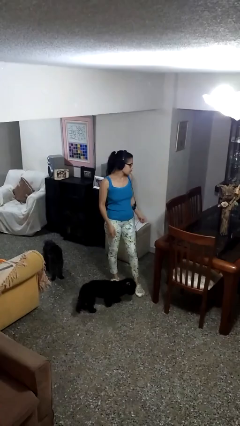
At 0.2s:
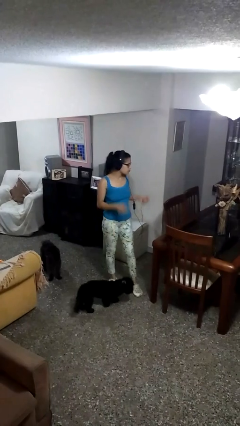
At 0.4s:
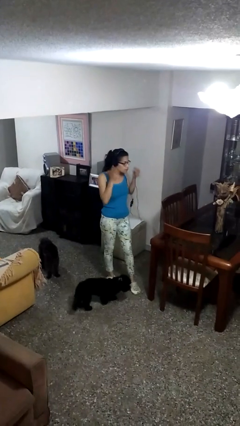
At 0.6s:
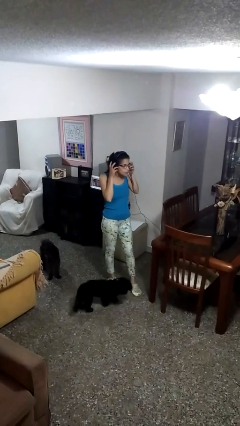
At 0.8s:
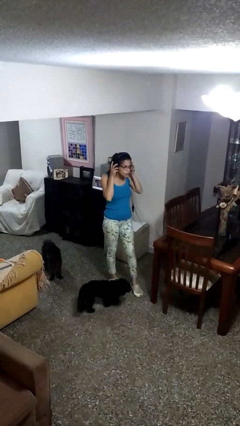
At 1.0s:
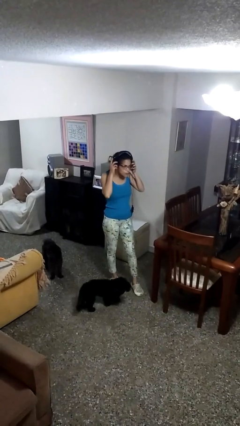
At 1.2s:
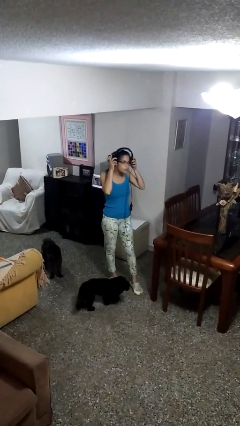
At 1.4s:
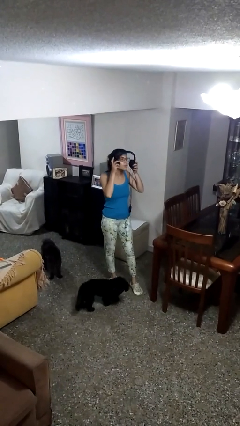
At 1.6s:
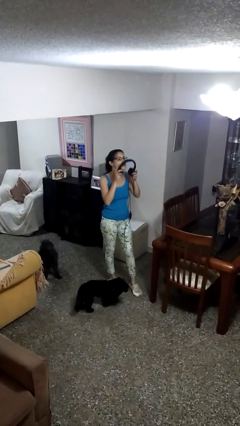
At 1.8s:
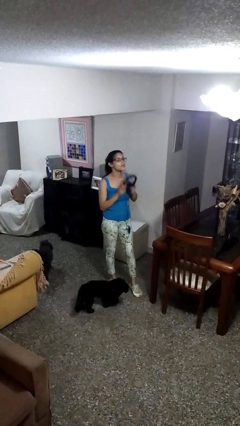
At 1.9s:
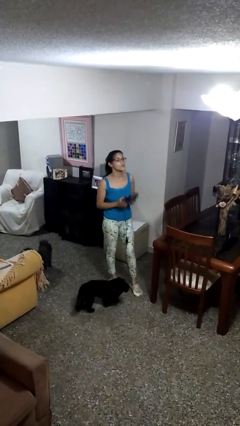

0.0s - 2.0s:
person takes off headphones

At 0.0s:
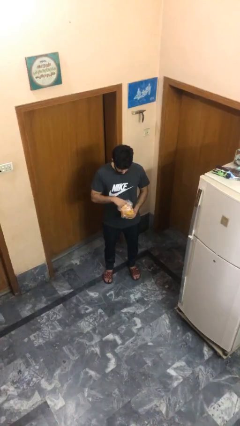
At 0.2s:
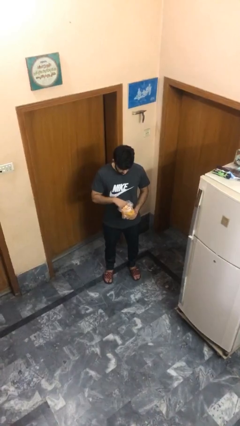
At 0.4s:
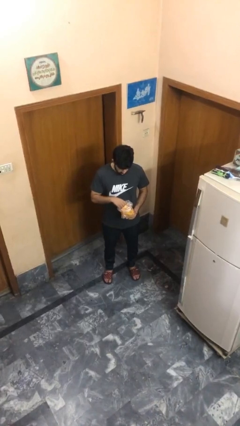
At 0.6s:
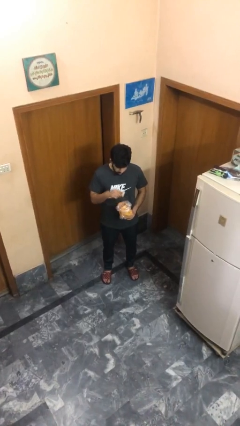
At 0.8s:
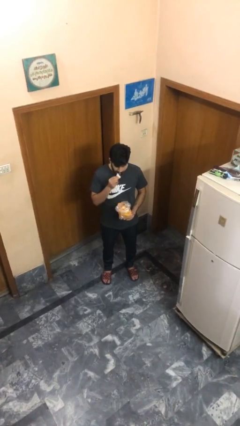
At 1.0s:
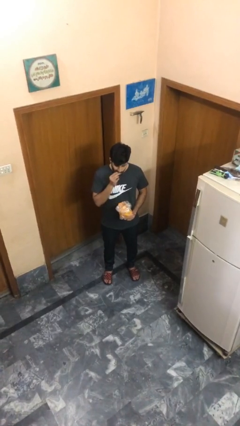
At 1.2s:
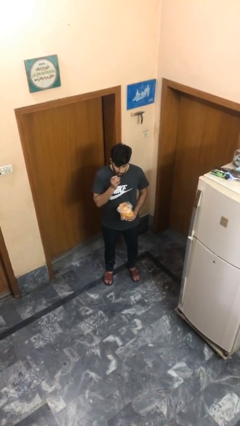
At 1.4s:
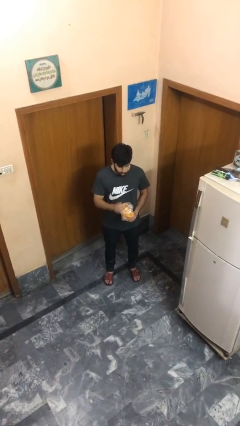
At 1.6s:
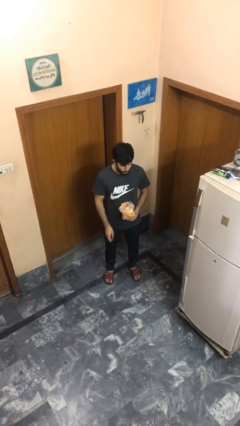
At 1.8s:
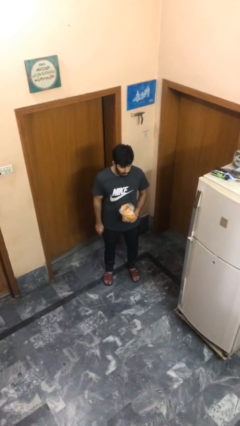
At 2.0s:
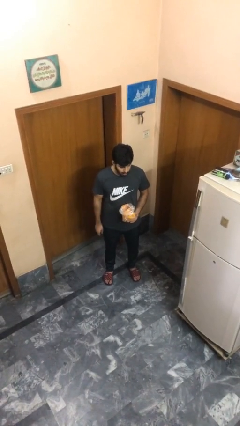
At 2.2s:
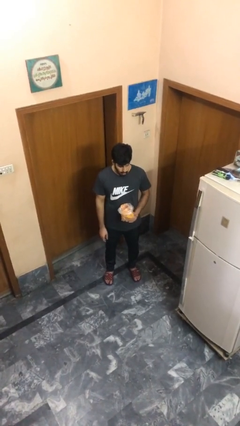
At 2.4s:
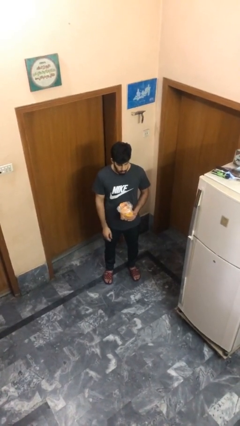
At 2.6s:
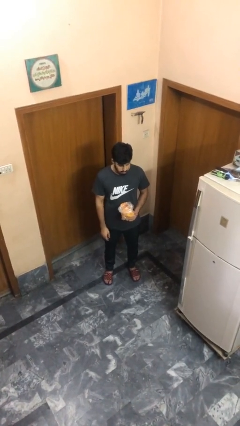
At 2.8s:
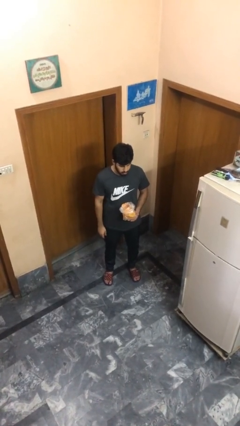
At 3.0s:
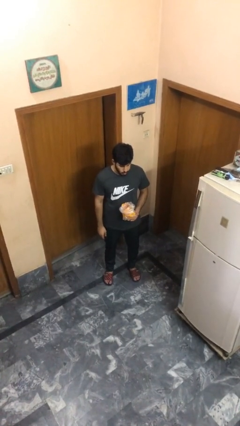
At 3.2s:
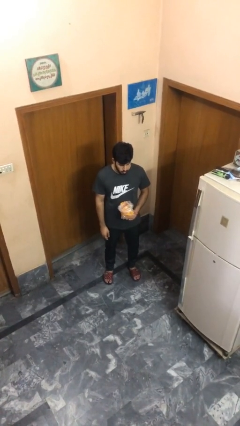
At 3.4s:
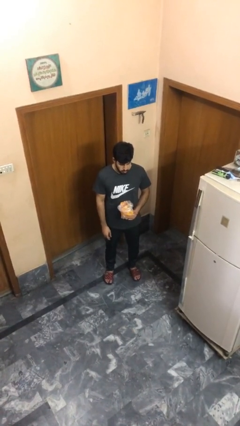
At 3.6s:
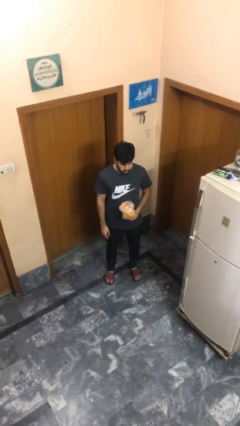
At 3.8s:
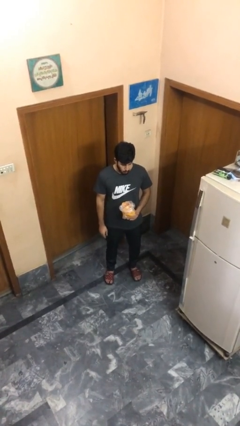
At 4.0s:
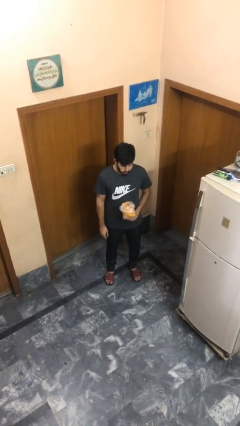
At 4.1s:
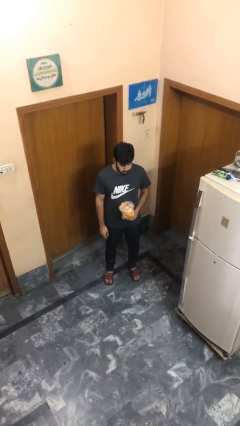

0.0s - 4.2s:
person eats snack from bag

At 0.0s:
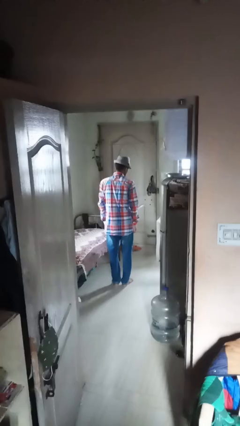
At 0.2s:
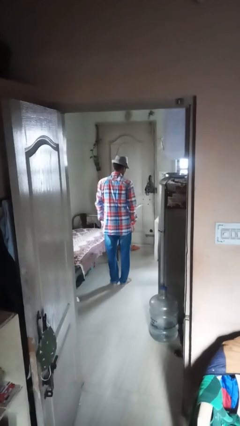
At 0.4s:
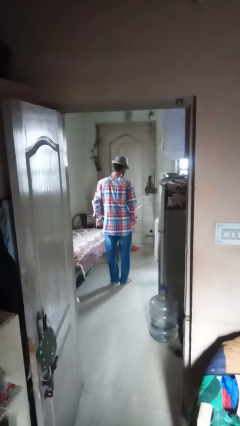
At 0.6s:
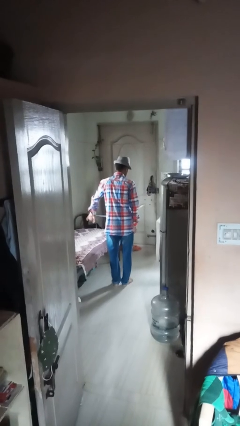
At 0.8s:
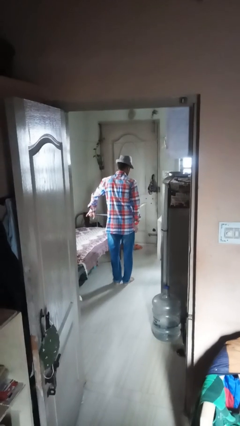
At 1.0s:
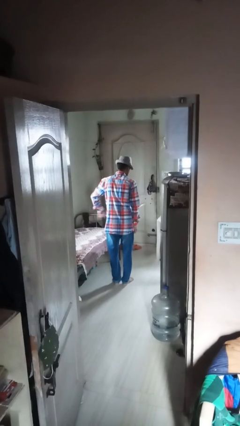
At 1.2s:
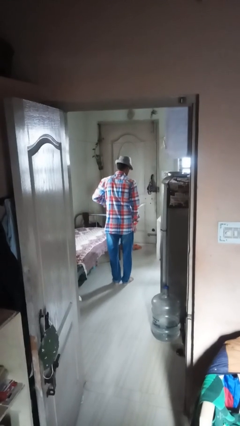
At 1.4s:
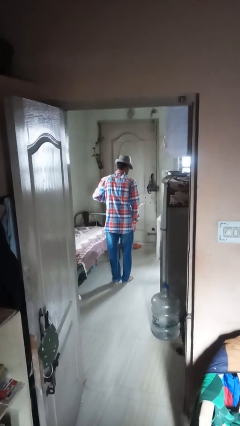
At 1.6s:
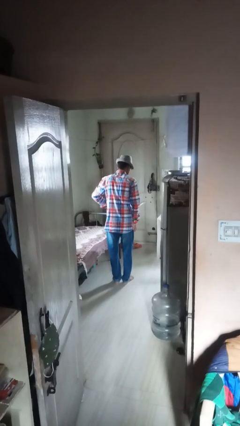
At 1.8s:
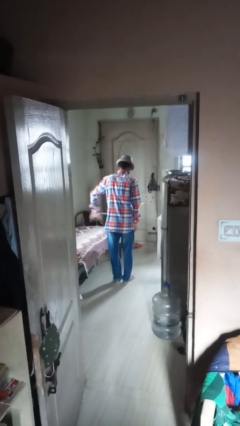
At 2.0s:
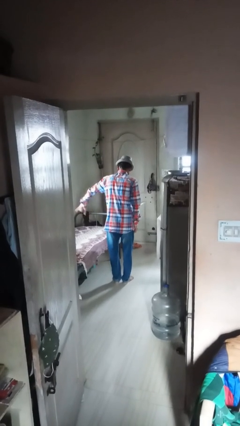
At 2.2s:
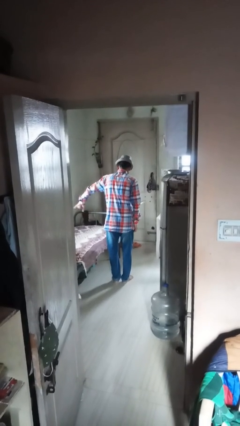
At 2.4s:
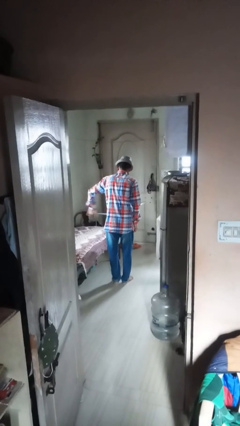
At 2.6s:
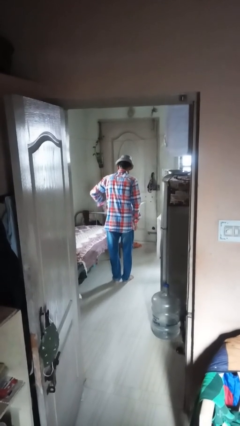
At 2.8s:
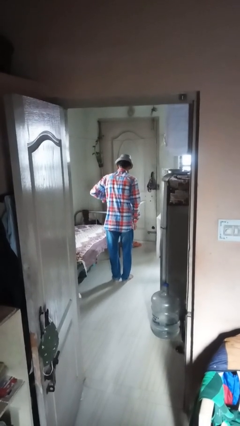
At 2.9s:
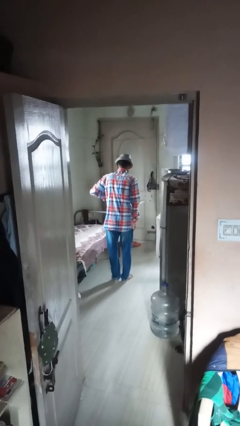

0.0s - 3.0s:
person gestures hang loose

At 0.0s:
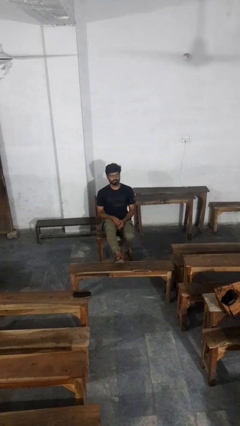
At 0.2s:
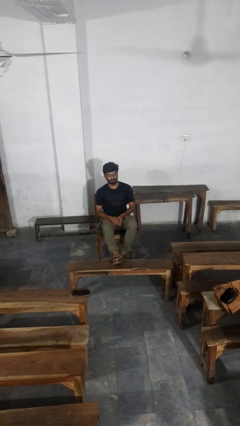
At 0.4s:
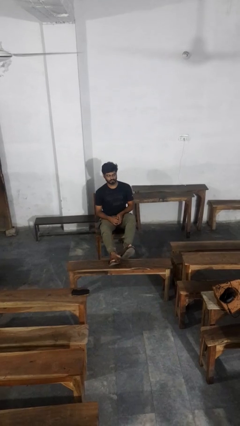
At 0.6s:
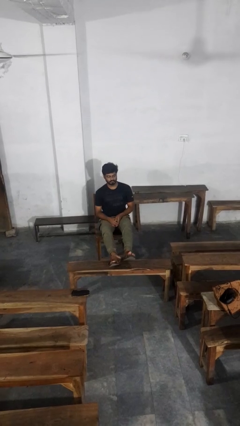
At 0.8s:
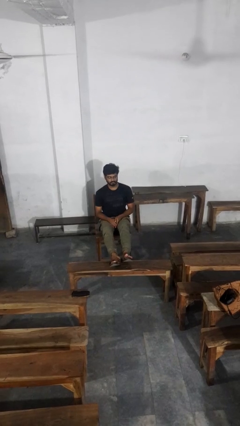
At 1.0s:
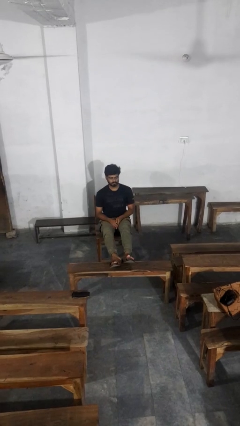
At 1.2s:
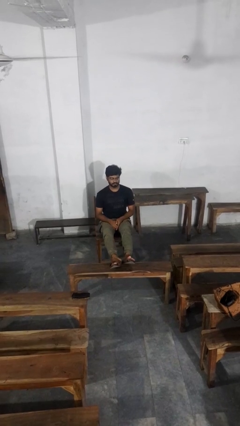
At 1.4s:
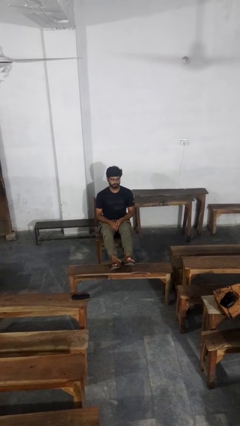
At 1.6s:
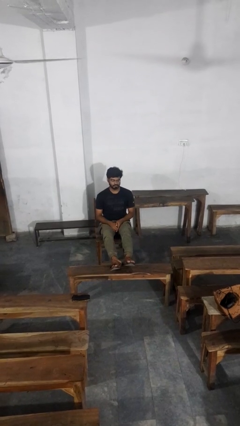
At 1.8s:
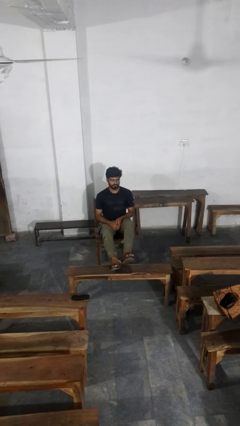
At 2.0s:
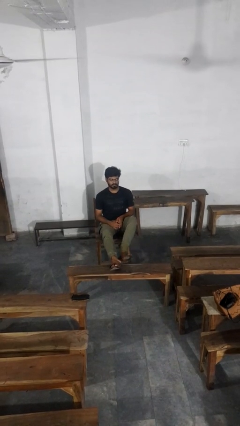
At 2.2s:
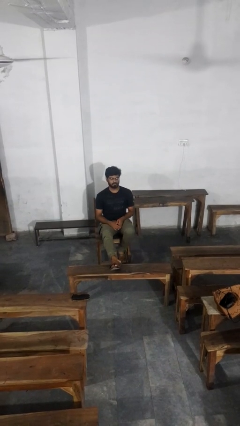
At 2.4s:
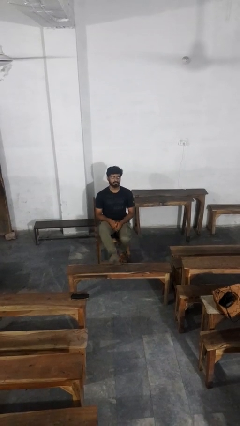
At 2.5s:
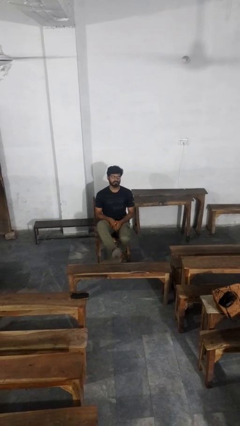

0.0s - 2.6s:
person puts feet up

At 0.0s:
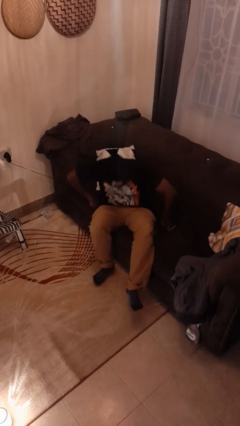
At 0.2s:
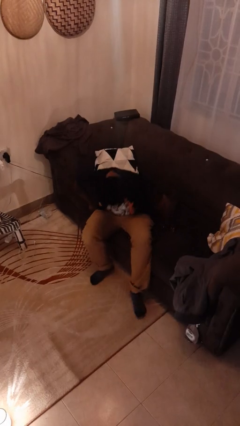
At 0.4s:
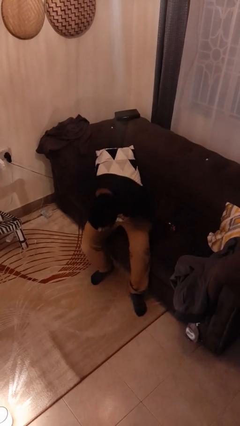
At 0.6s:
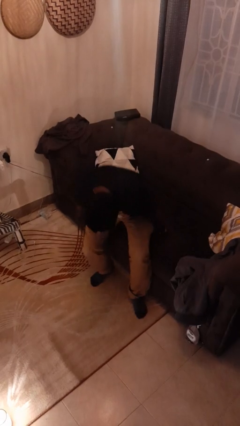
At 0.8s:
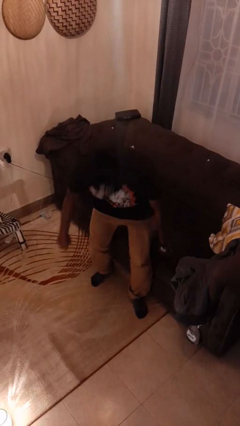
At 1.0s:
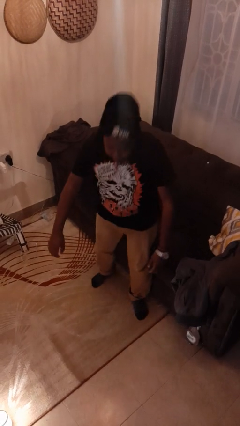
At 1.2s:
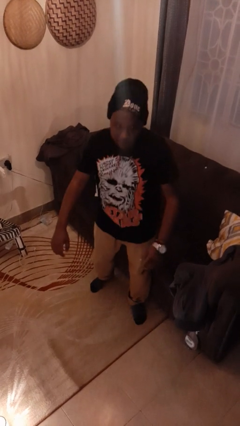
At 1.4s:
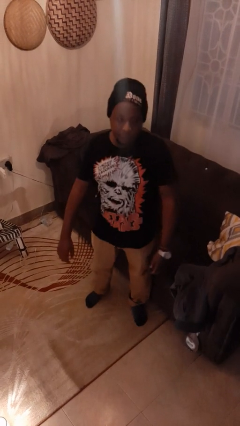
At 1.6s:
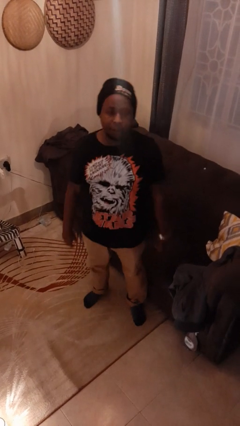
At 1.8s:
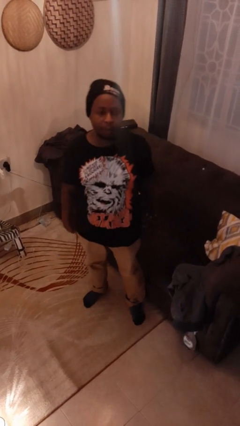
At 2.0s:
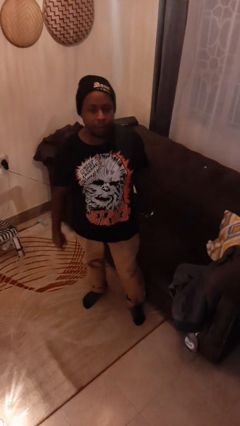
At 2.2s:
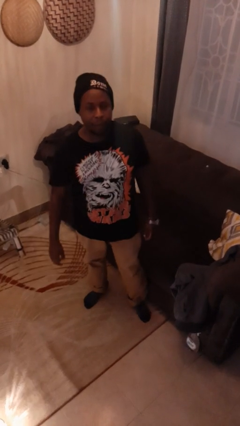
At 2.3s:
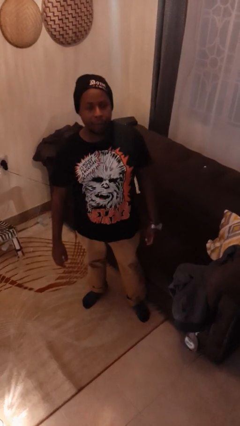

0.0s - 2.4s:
person stands up

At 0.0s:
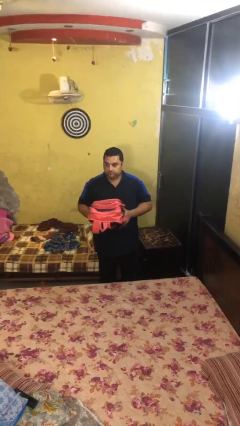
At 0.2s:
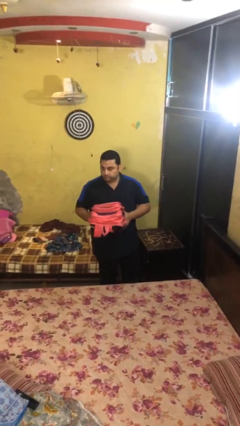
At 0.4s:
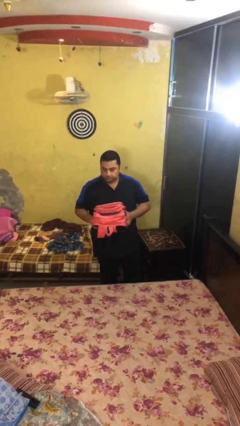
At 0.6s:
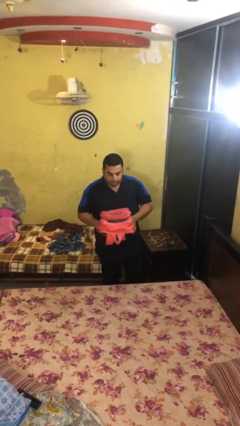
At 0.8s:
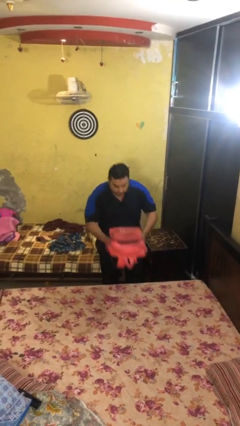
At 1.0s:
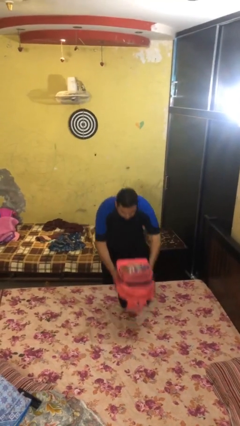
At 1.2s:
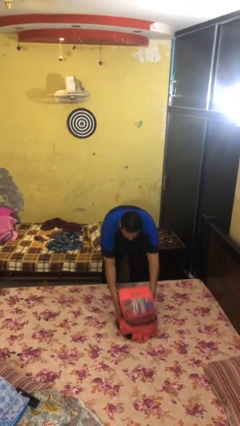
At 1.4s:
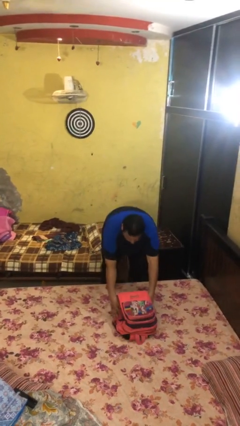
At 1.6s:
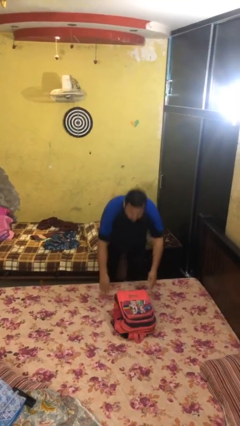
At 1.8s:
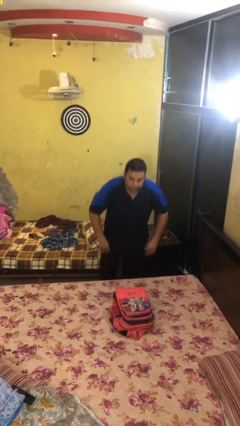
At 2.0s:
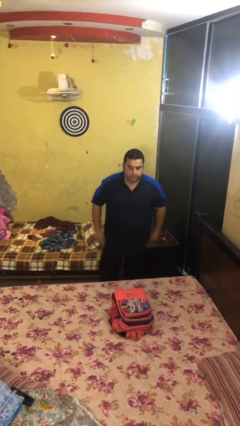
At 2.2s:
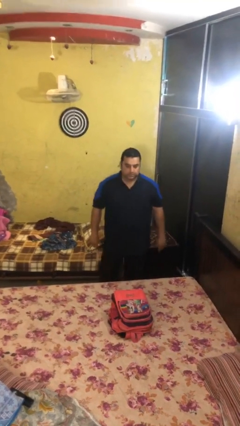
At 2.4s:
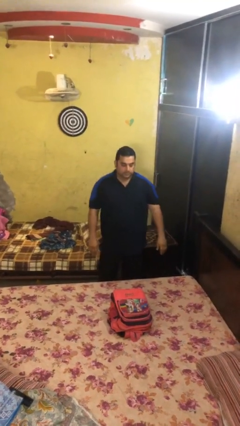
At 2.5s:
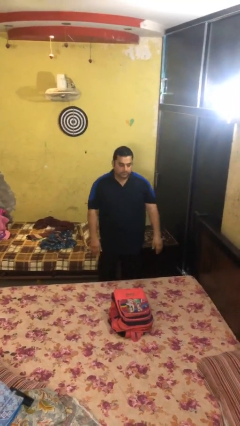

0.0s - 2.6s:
person puts down object on bed

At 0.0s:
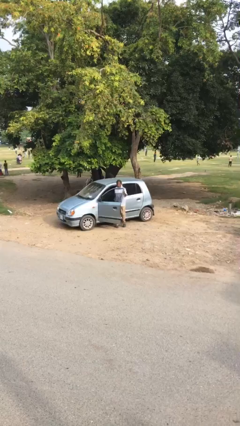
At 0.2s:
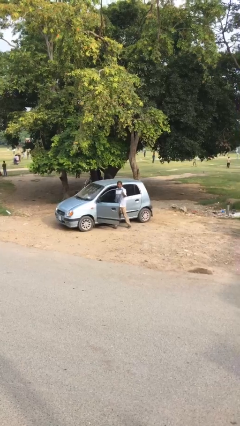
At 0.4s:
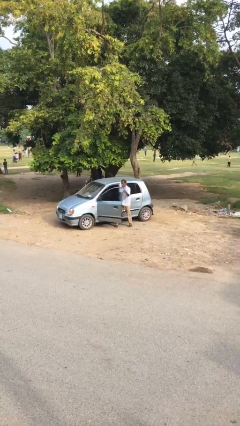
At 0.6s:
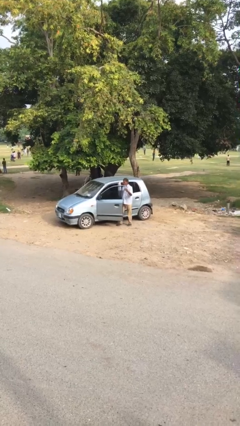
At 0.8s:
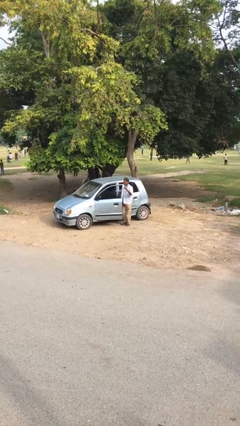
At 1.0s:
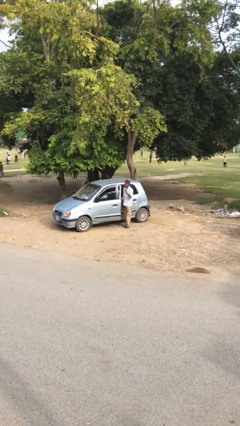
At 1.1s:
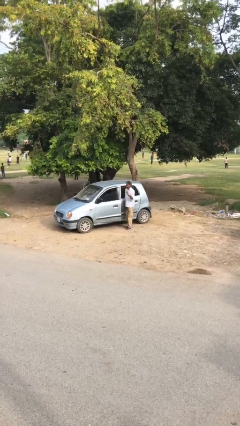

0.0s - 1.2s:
person closes car door
